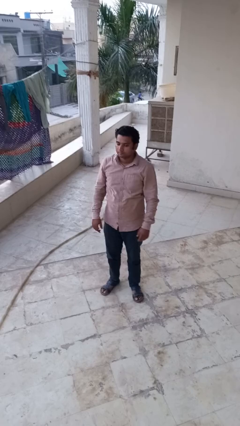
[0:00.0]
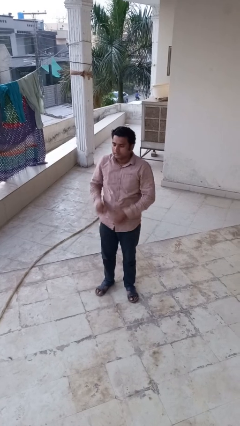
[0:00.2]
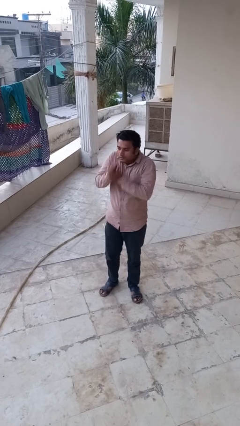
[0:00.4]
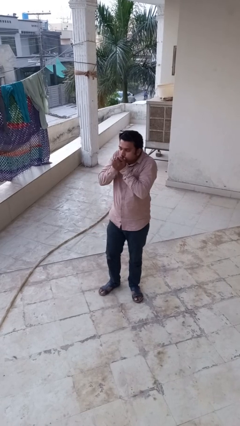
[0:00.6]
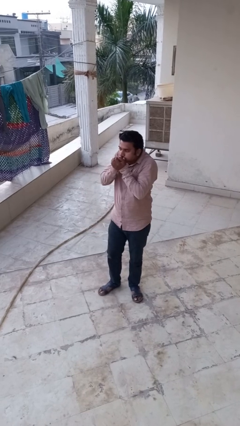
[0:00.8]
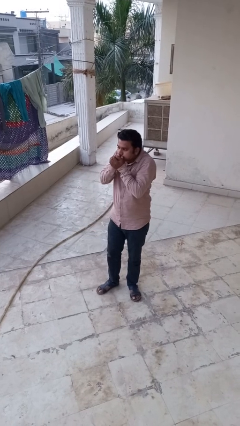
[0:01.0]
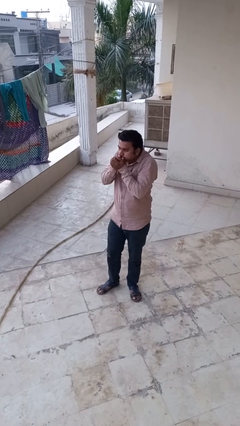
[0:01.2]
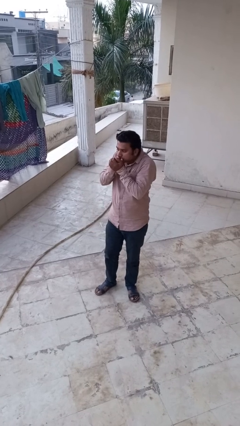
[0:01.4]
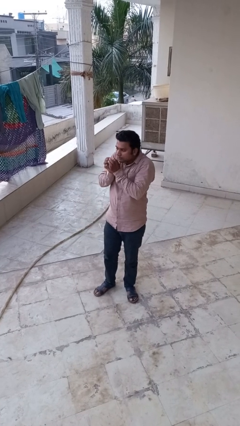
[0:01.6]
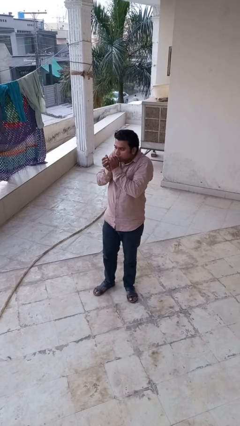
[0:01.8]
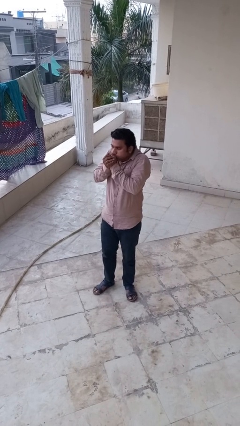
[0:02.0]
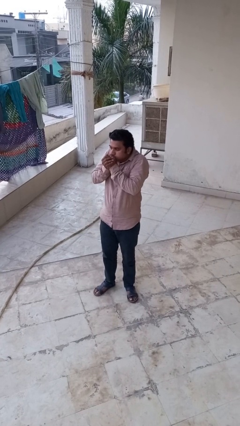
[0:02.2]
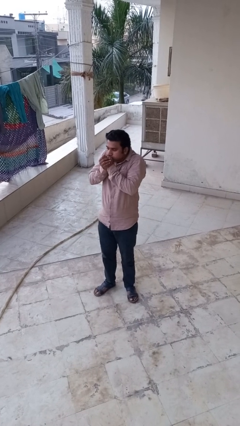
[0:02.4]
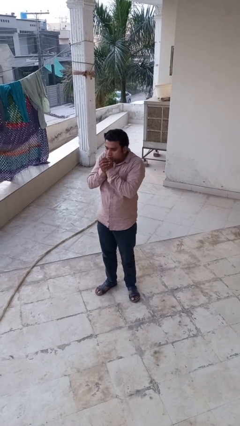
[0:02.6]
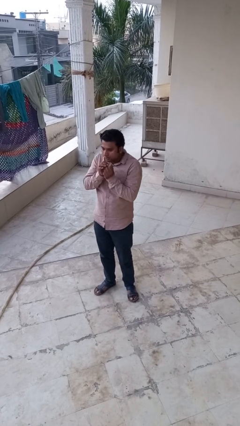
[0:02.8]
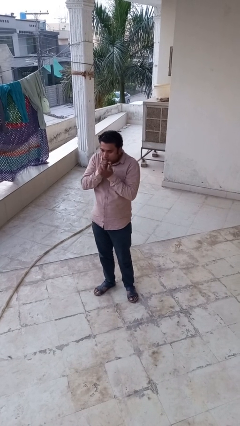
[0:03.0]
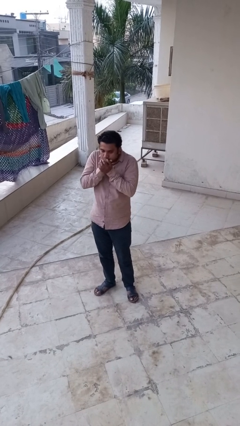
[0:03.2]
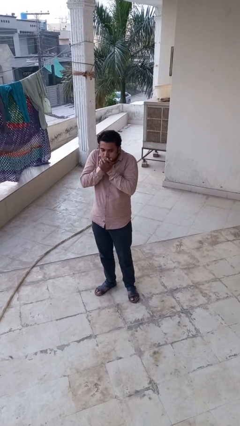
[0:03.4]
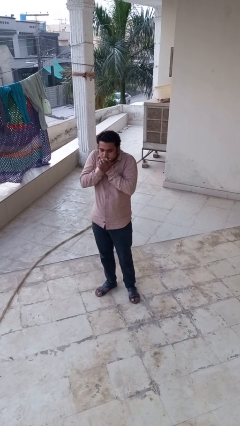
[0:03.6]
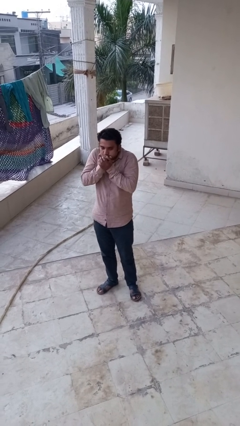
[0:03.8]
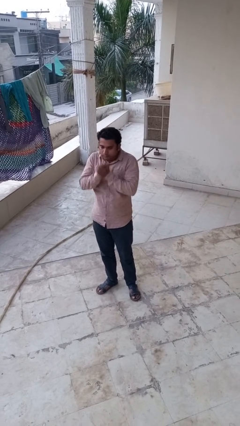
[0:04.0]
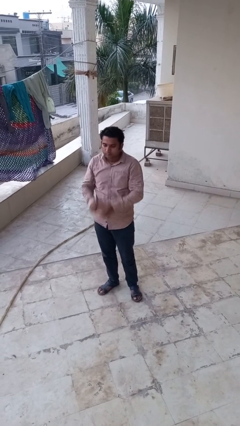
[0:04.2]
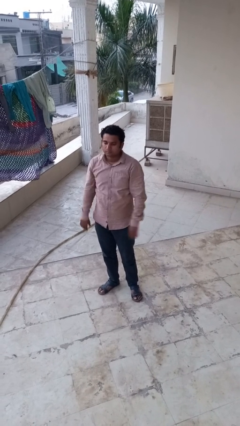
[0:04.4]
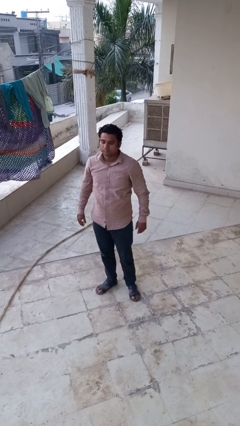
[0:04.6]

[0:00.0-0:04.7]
person blows into hands

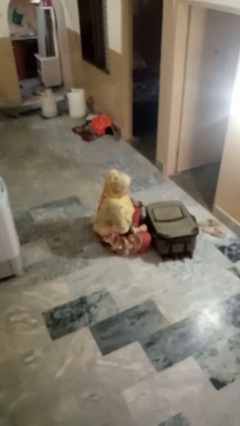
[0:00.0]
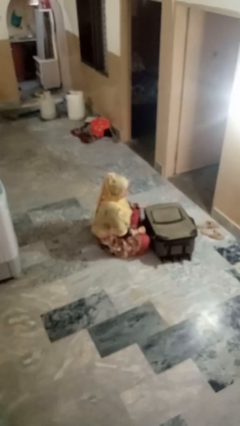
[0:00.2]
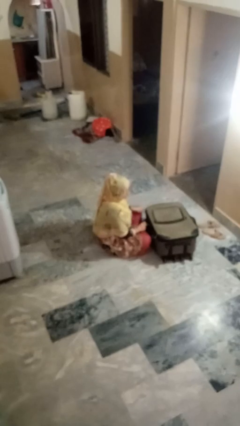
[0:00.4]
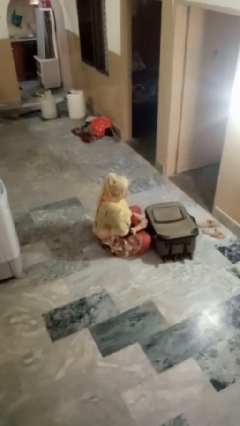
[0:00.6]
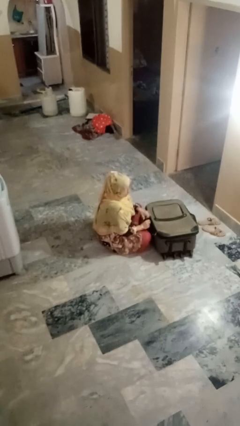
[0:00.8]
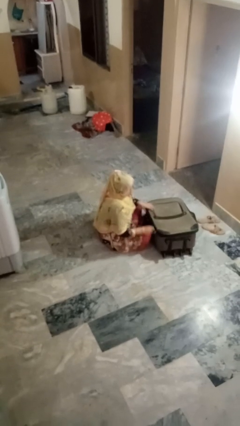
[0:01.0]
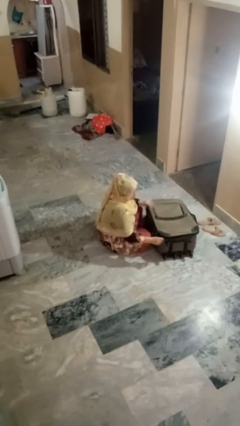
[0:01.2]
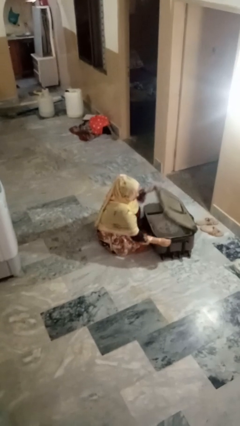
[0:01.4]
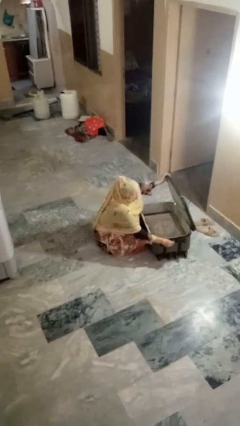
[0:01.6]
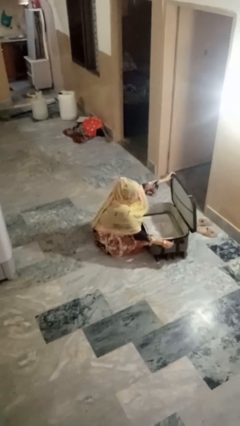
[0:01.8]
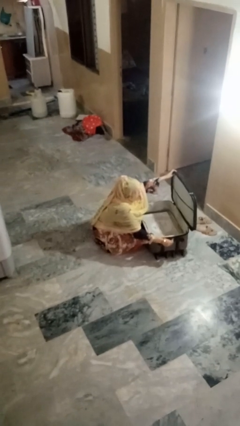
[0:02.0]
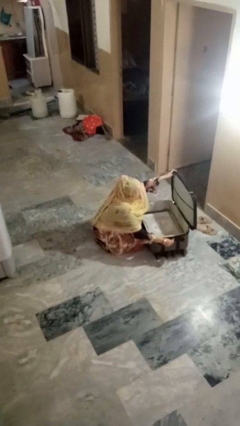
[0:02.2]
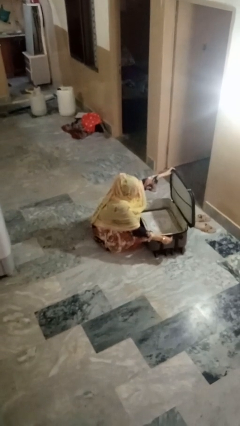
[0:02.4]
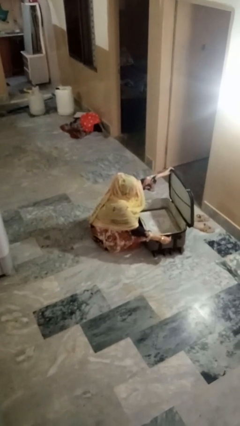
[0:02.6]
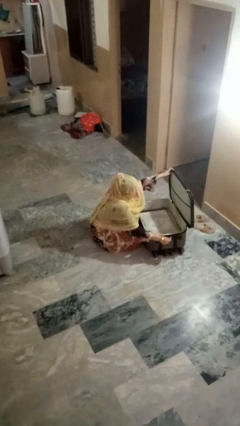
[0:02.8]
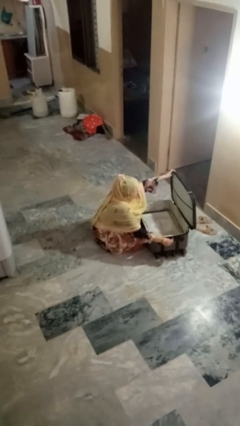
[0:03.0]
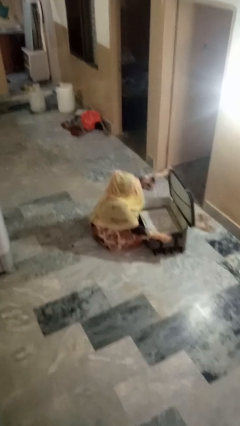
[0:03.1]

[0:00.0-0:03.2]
person opens suitcase

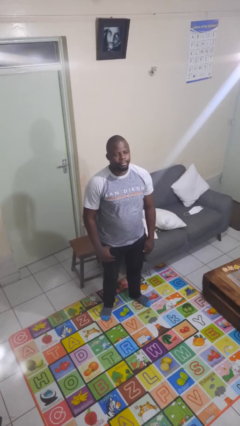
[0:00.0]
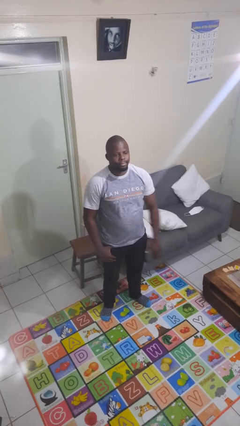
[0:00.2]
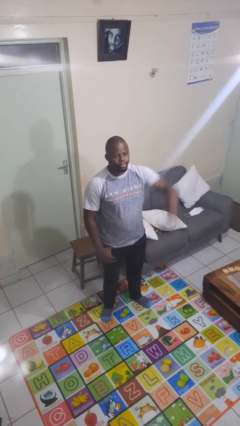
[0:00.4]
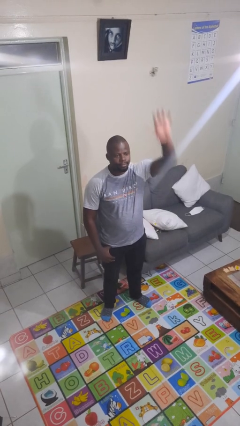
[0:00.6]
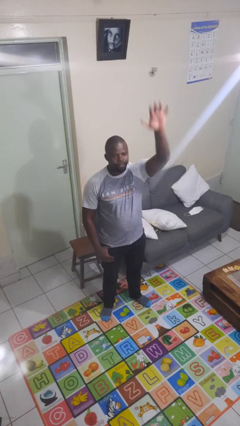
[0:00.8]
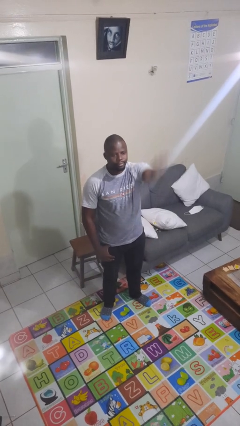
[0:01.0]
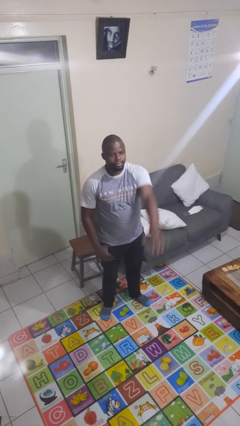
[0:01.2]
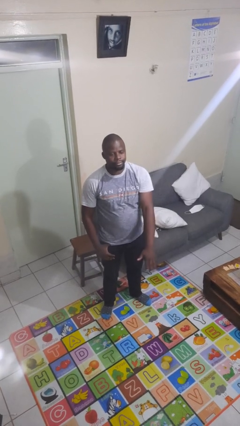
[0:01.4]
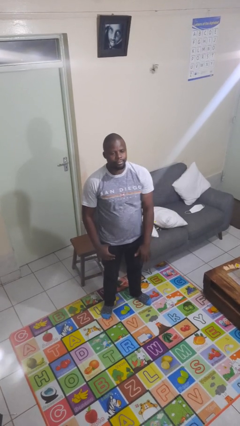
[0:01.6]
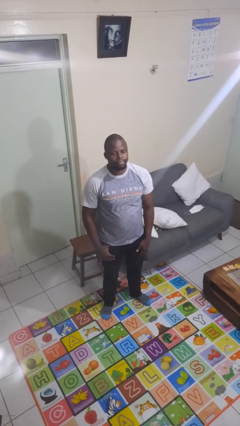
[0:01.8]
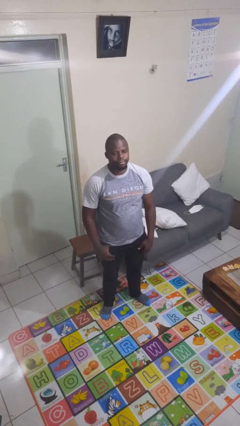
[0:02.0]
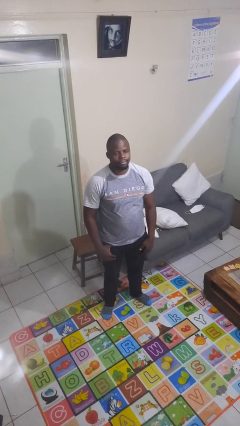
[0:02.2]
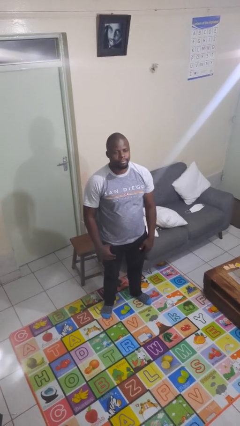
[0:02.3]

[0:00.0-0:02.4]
person gestures swipe down

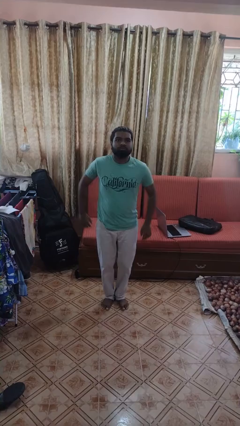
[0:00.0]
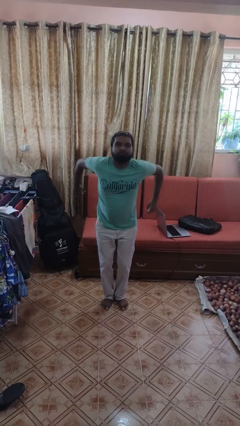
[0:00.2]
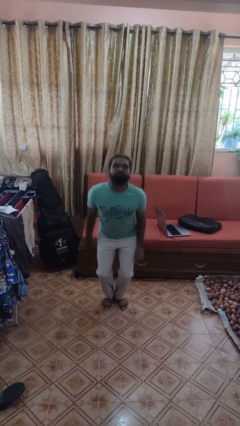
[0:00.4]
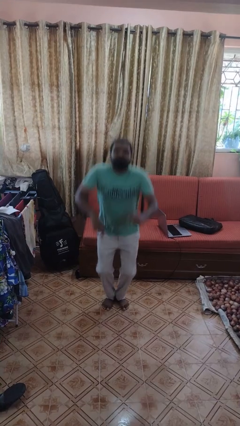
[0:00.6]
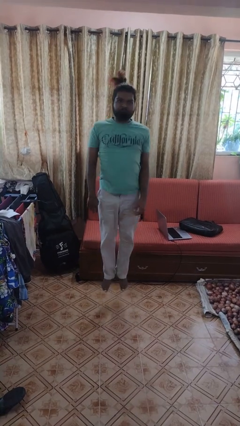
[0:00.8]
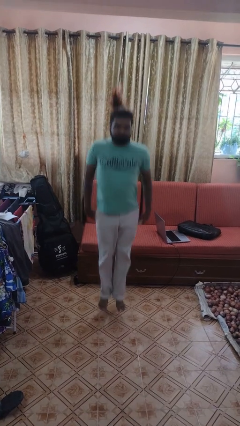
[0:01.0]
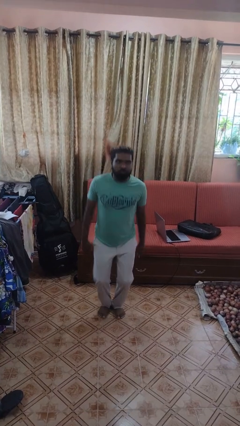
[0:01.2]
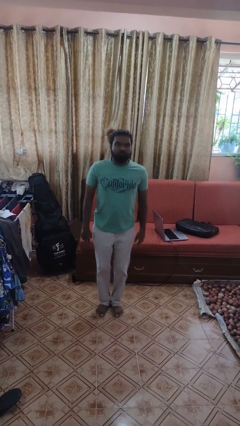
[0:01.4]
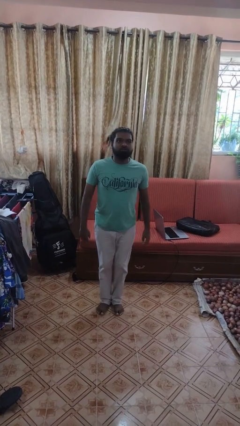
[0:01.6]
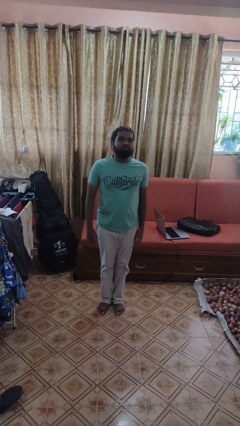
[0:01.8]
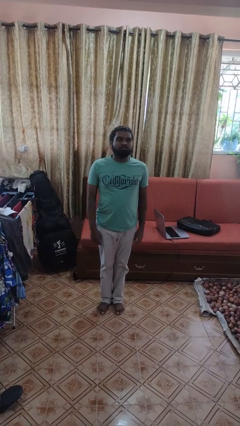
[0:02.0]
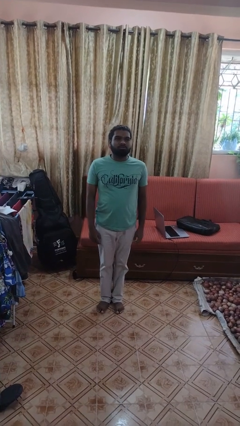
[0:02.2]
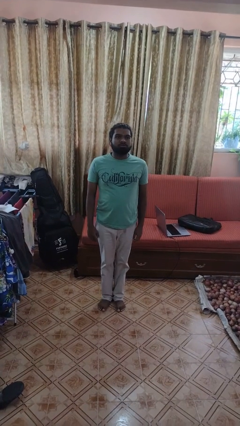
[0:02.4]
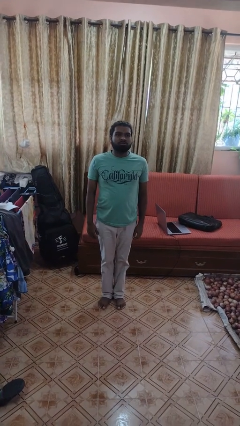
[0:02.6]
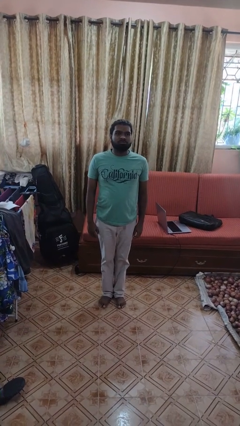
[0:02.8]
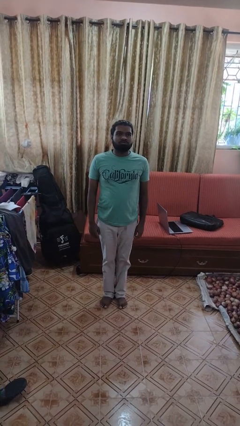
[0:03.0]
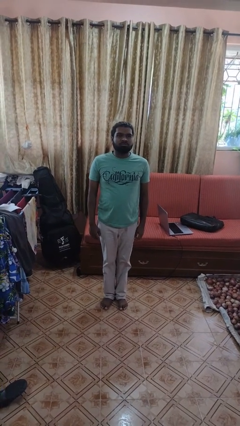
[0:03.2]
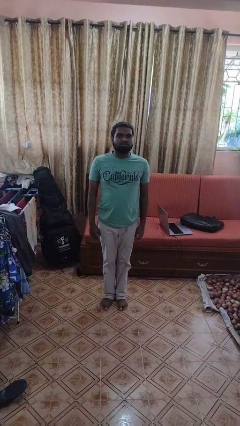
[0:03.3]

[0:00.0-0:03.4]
person jumps

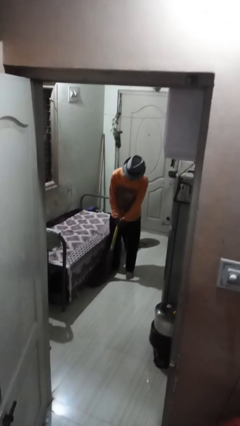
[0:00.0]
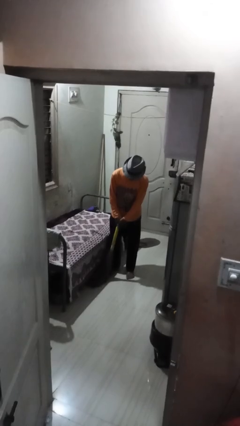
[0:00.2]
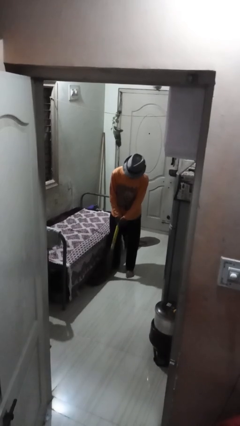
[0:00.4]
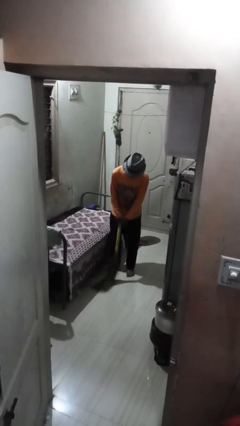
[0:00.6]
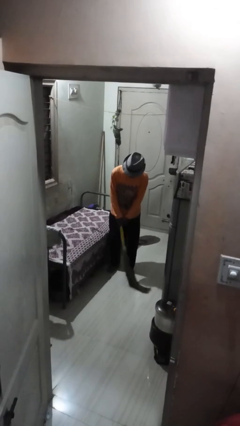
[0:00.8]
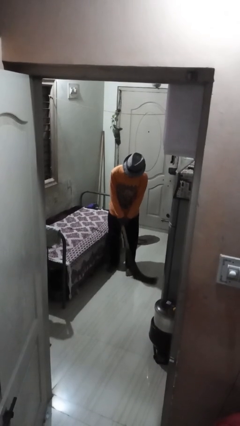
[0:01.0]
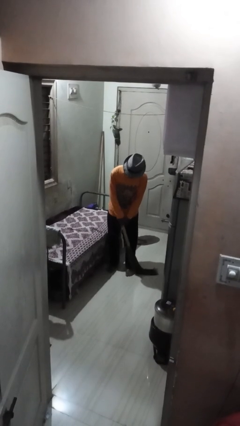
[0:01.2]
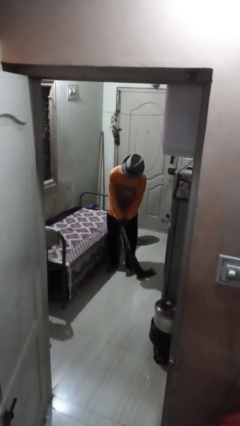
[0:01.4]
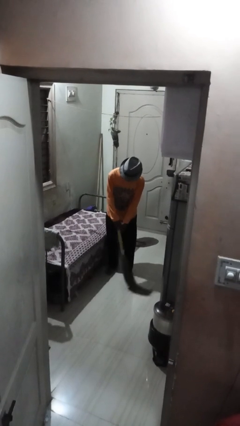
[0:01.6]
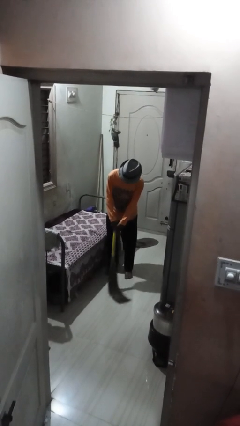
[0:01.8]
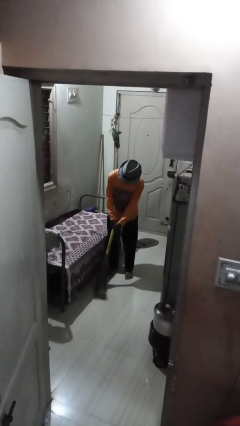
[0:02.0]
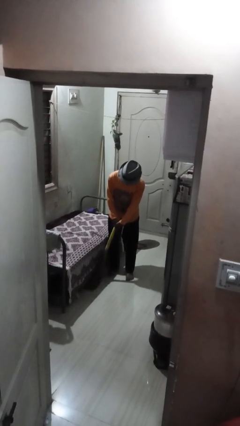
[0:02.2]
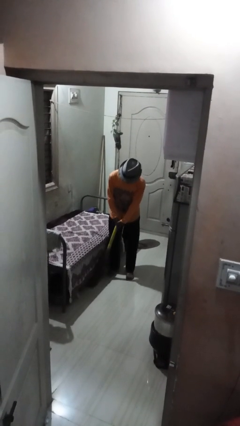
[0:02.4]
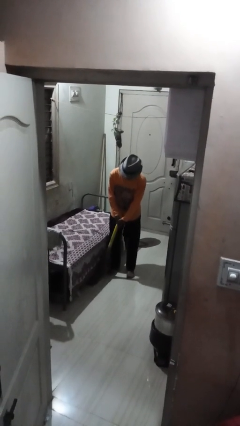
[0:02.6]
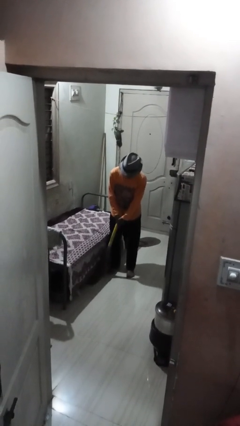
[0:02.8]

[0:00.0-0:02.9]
person sweeps floor

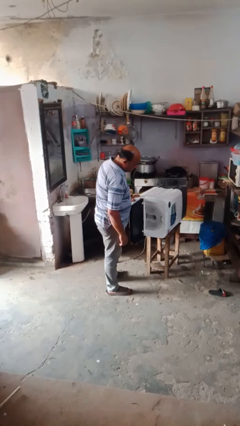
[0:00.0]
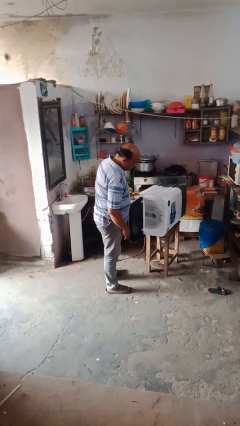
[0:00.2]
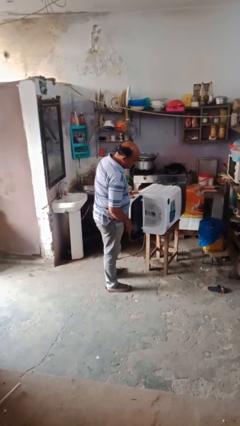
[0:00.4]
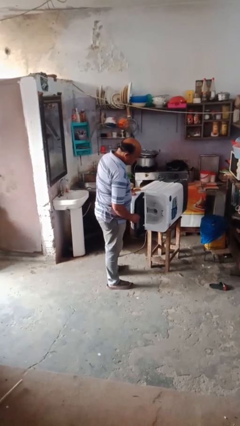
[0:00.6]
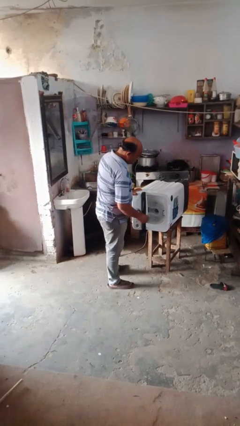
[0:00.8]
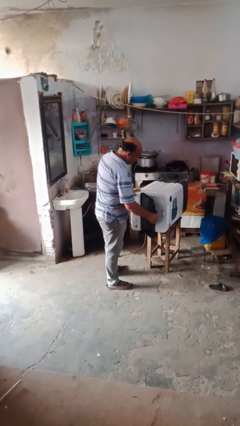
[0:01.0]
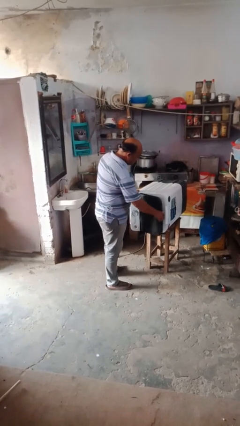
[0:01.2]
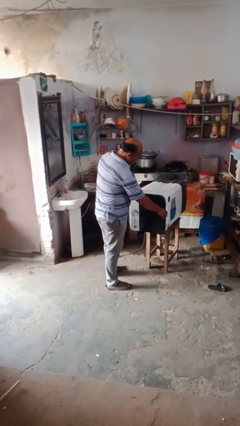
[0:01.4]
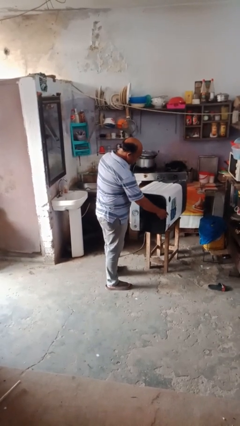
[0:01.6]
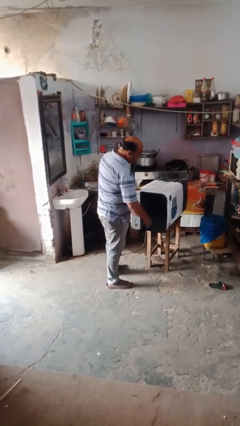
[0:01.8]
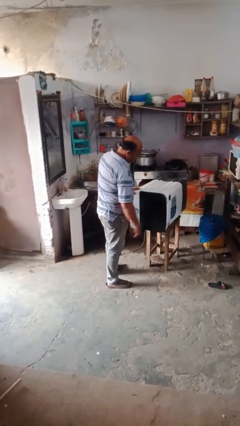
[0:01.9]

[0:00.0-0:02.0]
person closes dishwasher
